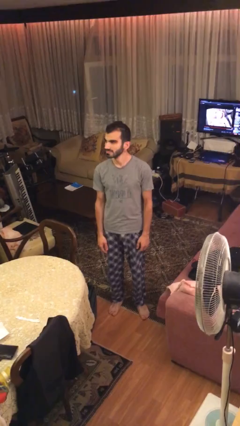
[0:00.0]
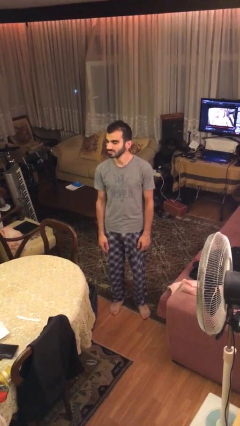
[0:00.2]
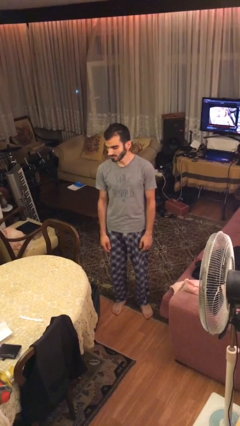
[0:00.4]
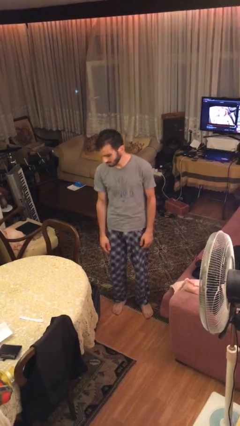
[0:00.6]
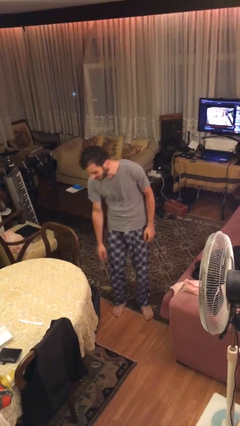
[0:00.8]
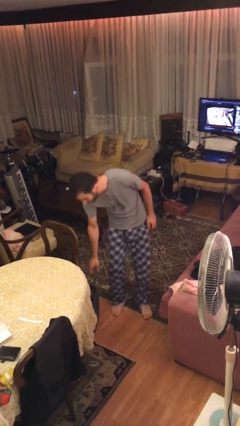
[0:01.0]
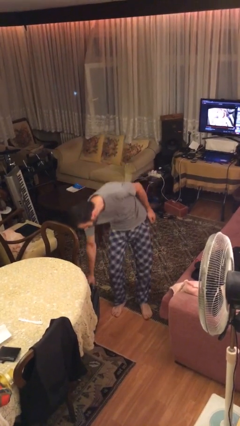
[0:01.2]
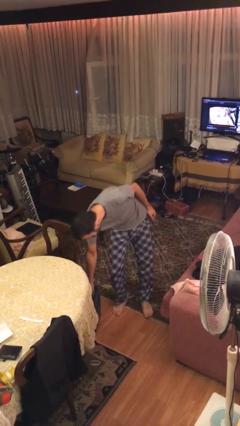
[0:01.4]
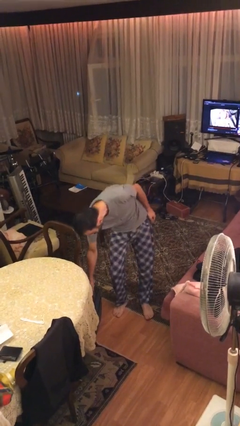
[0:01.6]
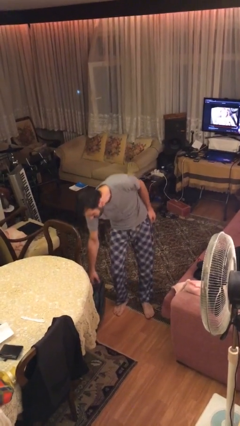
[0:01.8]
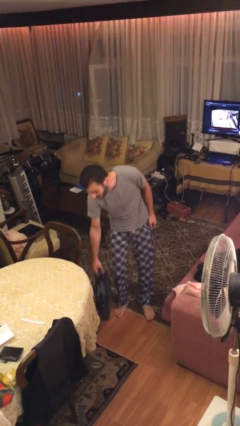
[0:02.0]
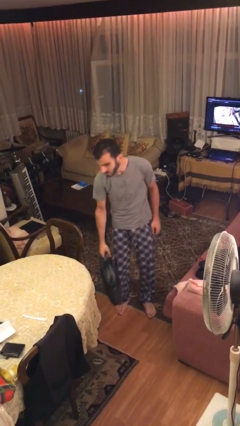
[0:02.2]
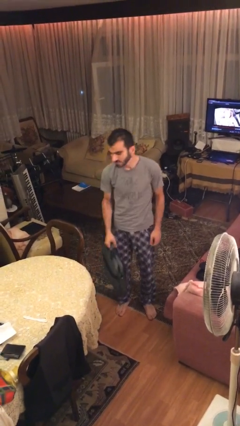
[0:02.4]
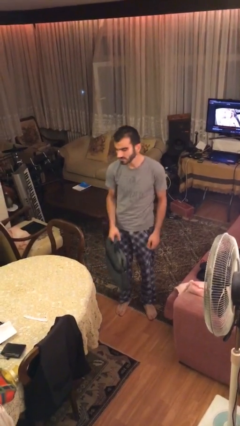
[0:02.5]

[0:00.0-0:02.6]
person picks up object from floor

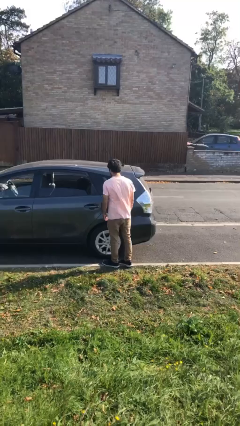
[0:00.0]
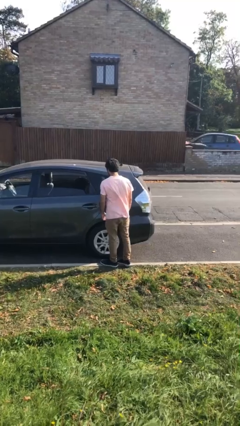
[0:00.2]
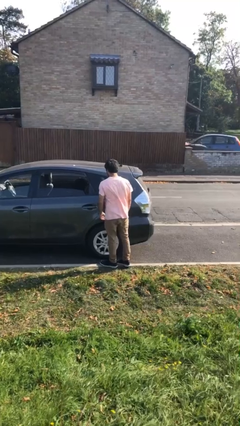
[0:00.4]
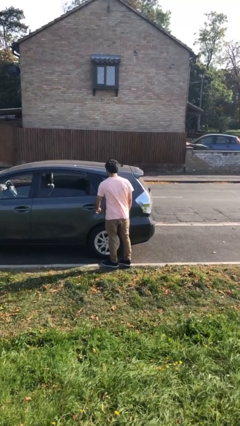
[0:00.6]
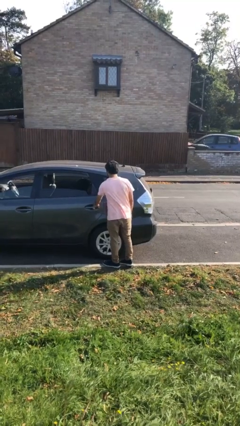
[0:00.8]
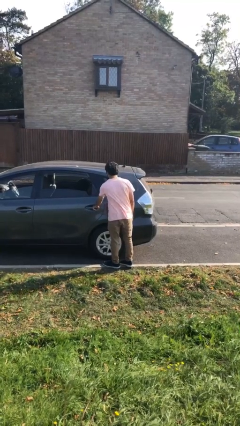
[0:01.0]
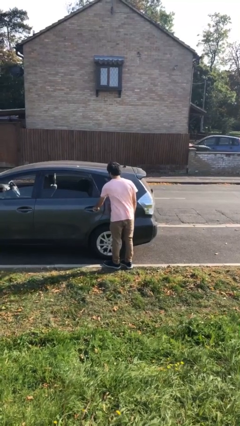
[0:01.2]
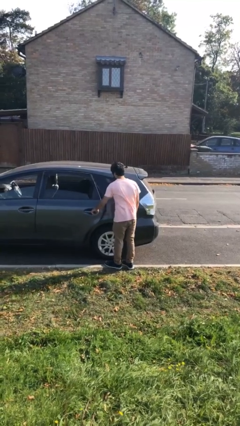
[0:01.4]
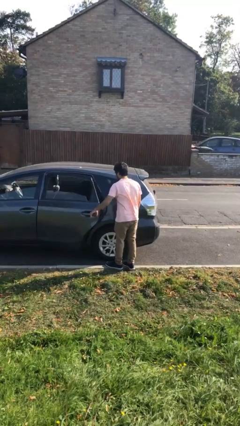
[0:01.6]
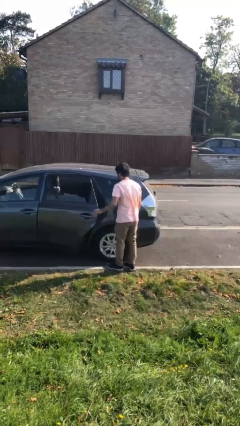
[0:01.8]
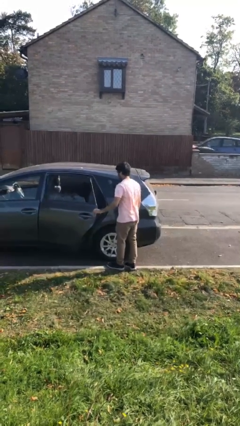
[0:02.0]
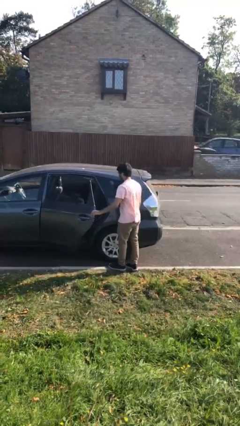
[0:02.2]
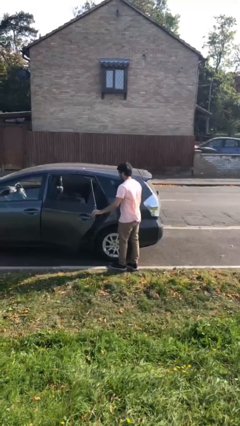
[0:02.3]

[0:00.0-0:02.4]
person opens car door

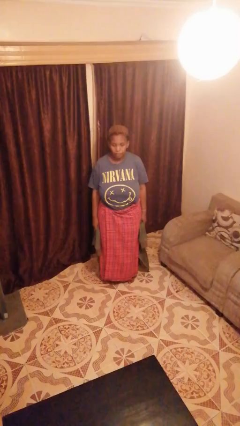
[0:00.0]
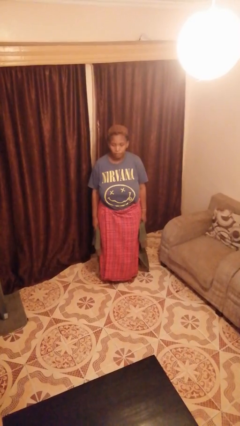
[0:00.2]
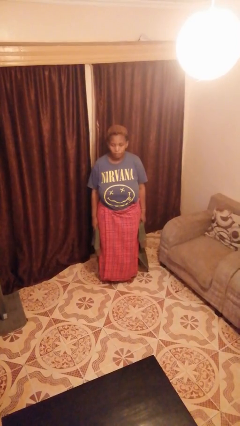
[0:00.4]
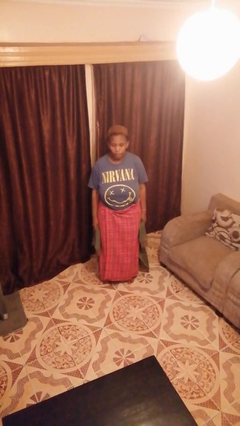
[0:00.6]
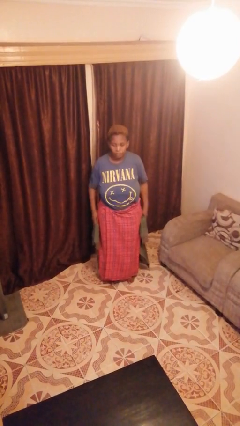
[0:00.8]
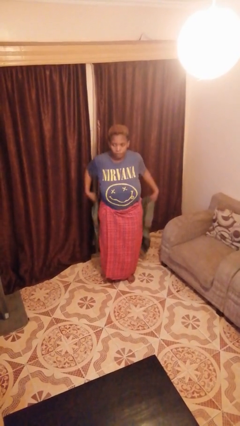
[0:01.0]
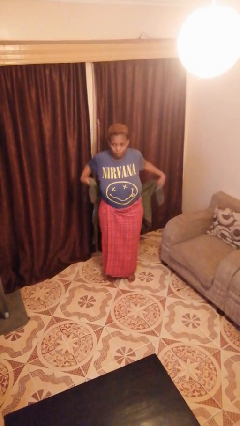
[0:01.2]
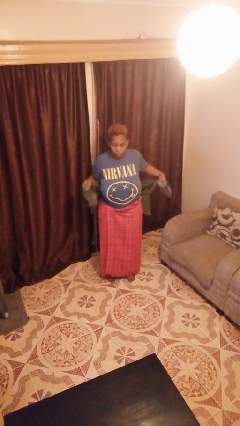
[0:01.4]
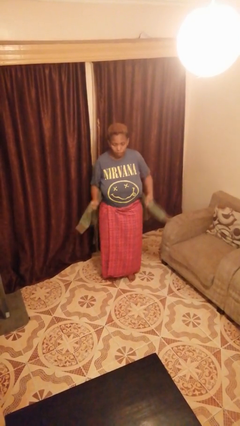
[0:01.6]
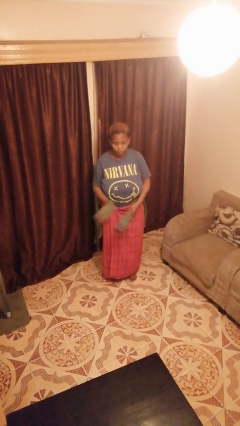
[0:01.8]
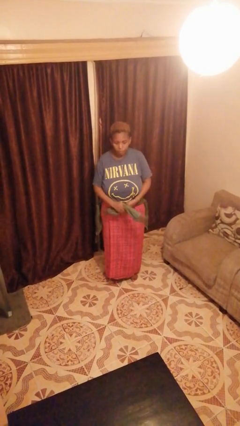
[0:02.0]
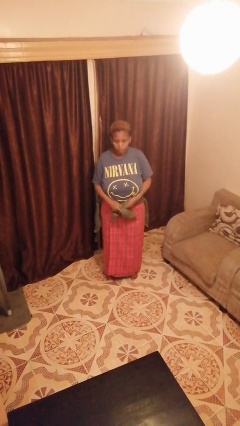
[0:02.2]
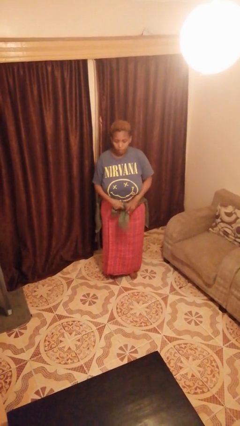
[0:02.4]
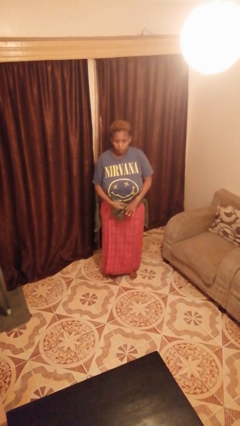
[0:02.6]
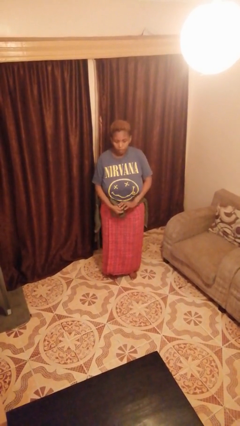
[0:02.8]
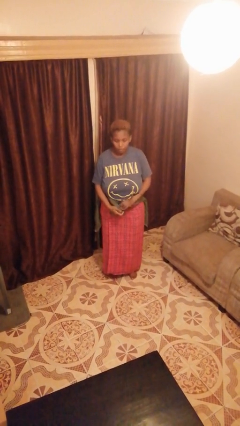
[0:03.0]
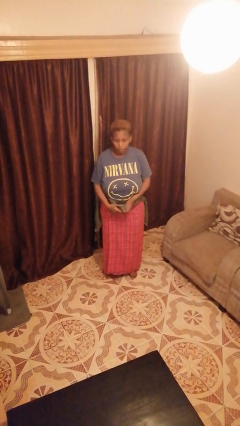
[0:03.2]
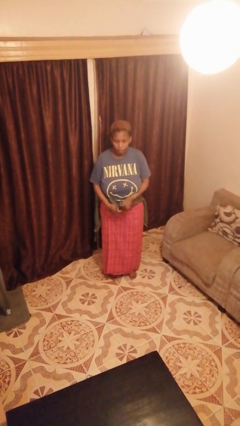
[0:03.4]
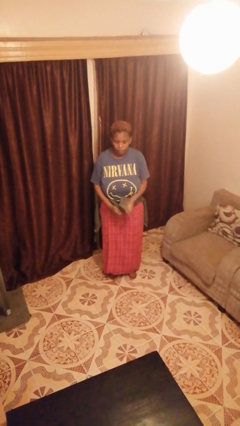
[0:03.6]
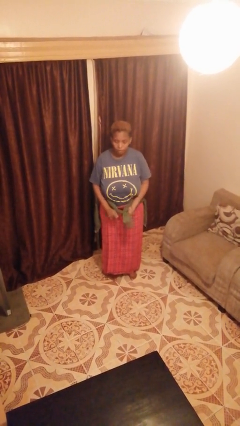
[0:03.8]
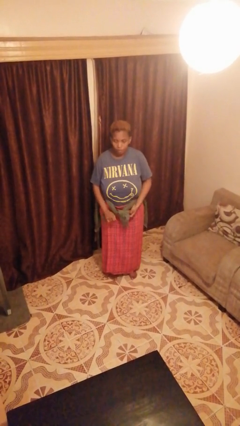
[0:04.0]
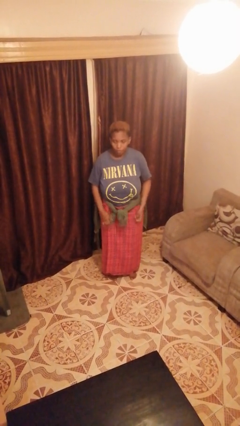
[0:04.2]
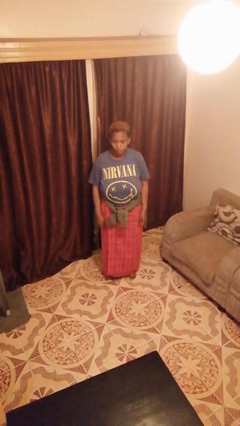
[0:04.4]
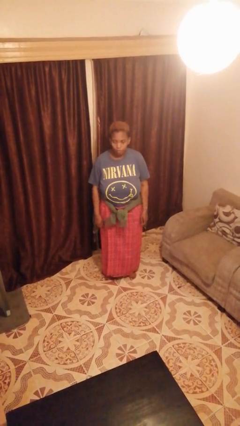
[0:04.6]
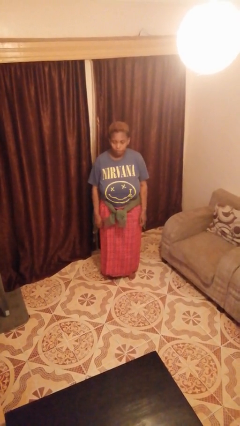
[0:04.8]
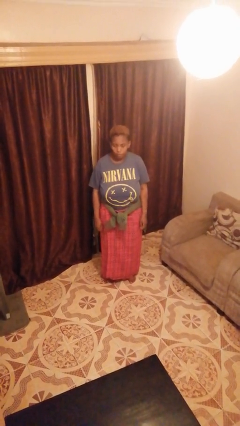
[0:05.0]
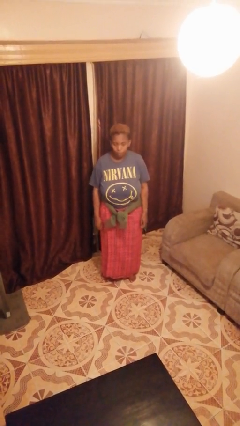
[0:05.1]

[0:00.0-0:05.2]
person ties jacket around waist

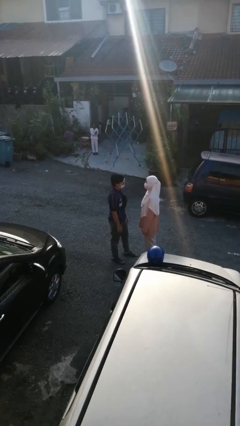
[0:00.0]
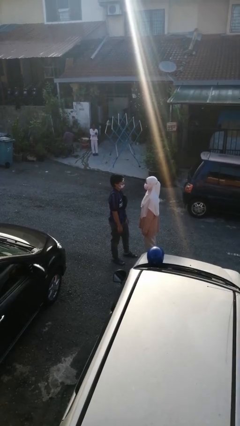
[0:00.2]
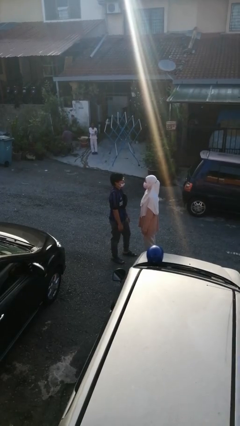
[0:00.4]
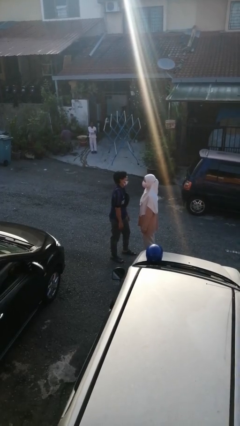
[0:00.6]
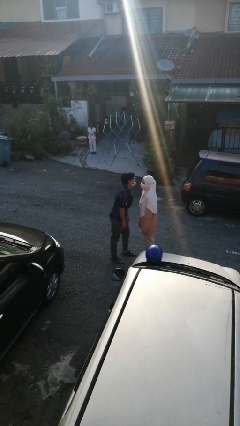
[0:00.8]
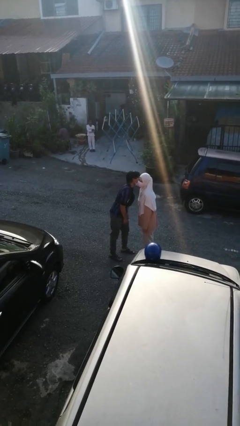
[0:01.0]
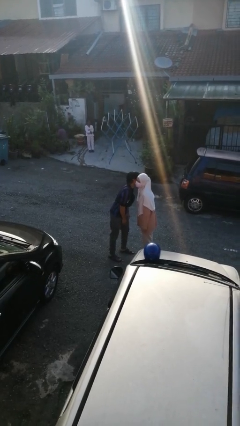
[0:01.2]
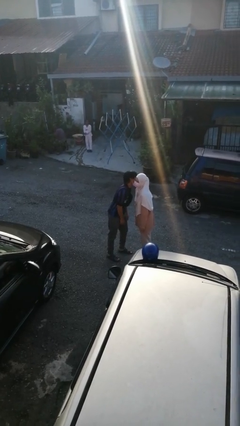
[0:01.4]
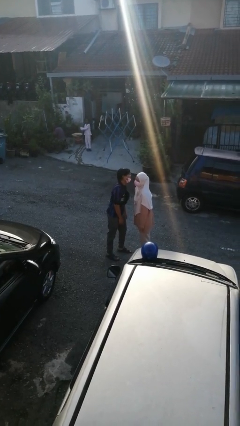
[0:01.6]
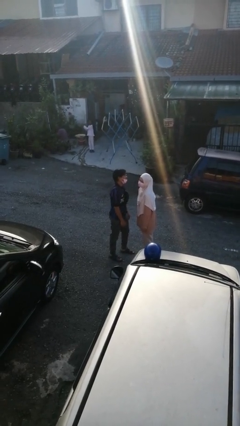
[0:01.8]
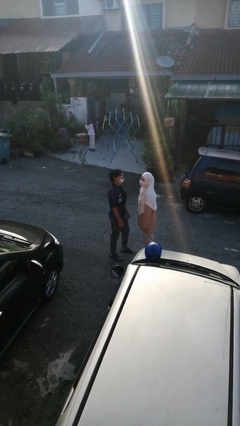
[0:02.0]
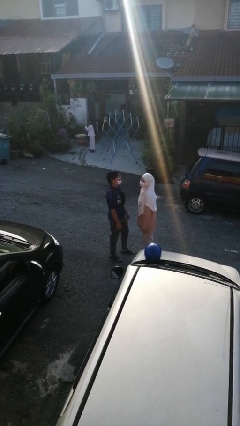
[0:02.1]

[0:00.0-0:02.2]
person kisses cheek of person

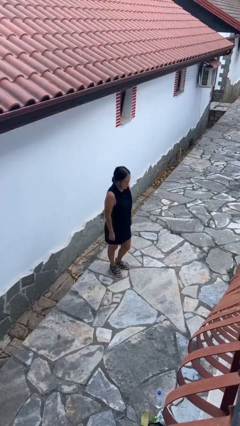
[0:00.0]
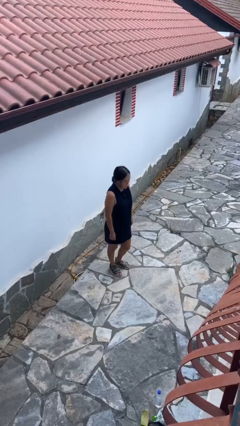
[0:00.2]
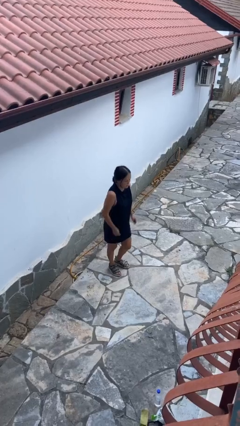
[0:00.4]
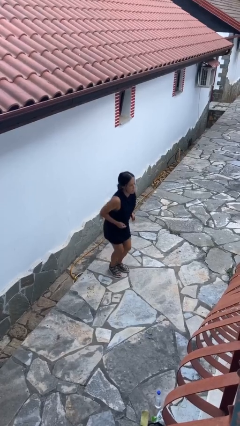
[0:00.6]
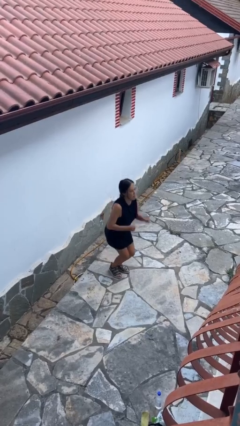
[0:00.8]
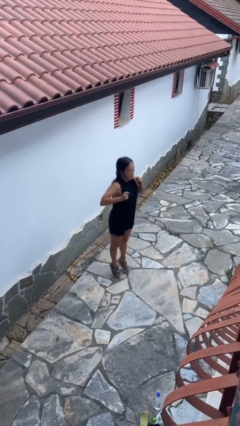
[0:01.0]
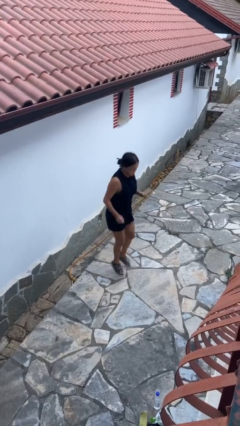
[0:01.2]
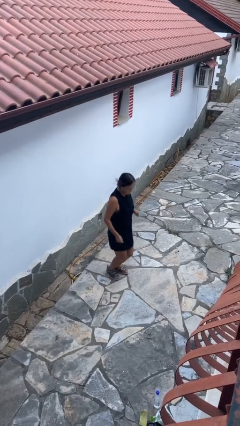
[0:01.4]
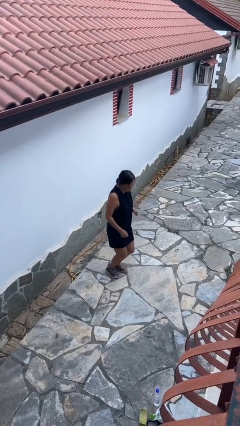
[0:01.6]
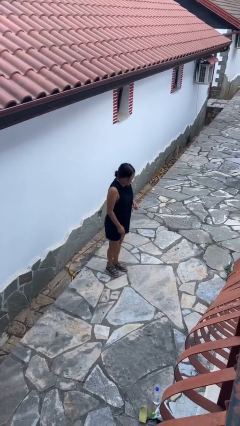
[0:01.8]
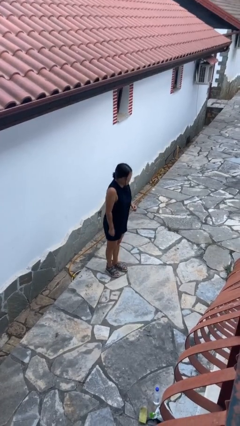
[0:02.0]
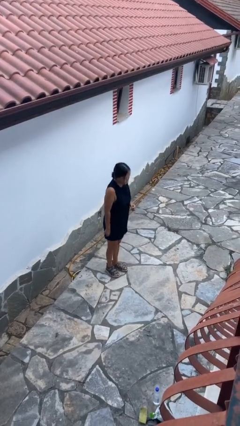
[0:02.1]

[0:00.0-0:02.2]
person jumps

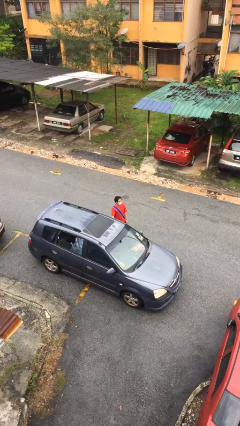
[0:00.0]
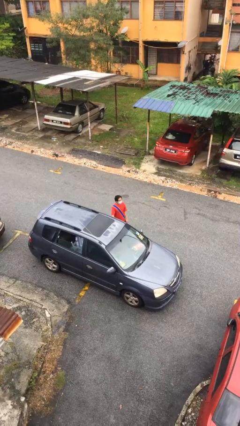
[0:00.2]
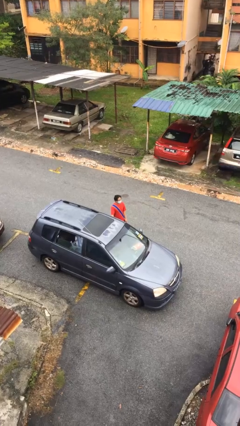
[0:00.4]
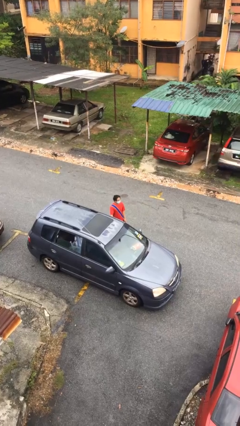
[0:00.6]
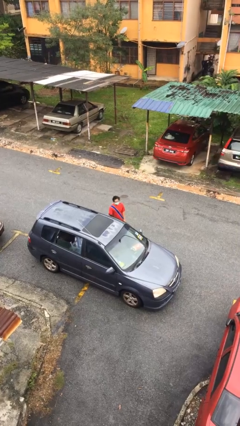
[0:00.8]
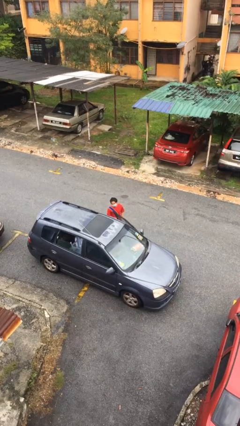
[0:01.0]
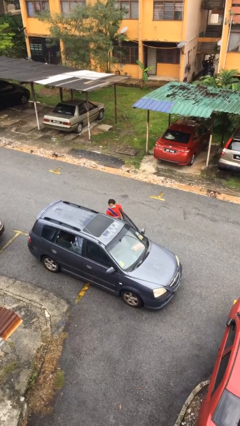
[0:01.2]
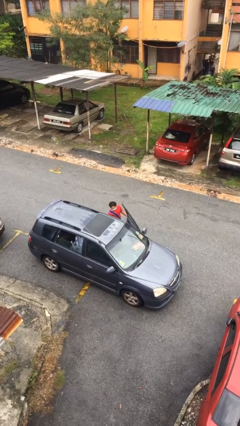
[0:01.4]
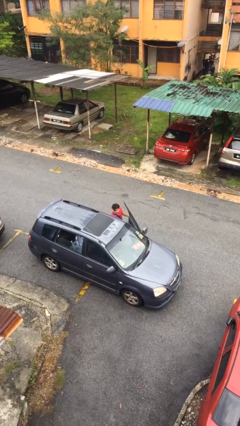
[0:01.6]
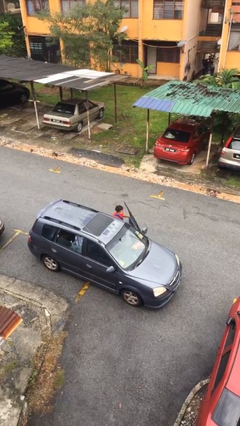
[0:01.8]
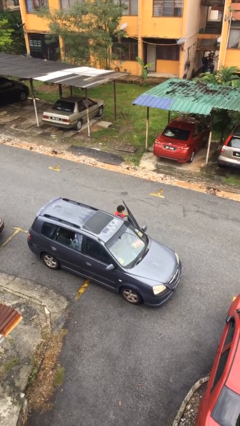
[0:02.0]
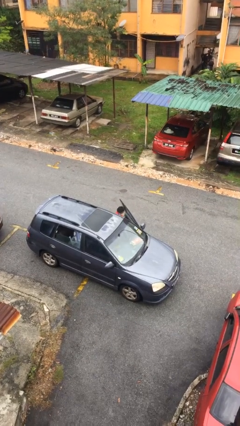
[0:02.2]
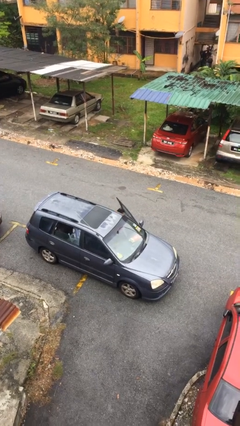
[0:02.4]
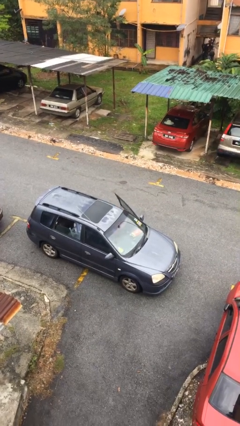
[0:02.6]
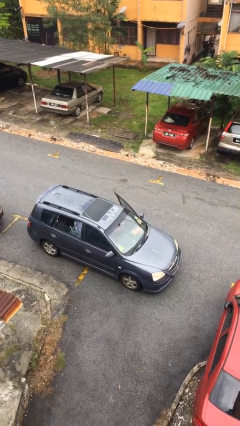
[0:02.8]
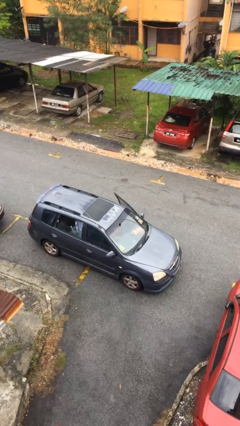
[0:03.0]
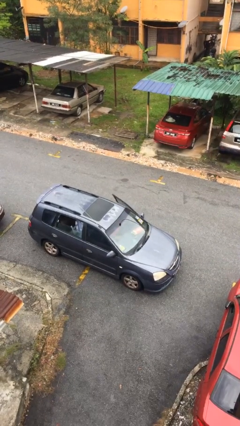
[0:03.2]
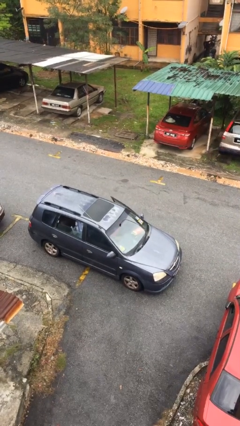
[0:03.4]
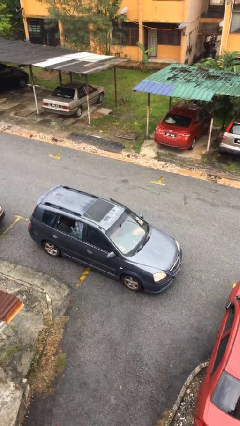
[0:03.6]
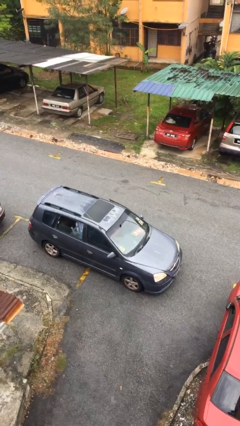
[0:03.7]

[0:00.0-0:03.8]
person enters car
